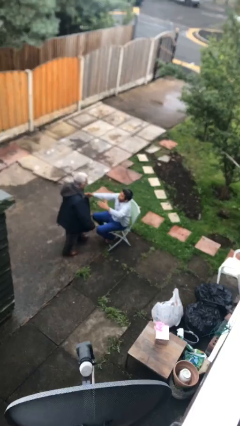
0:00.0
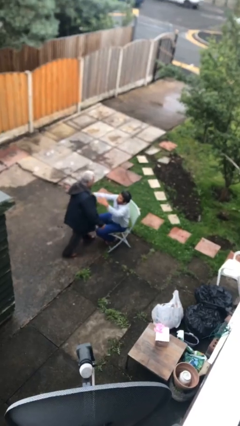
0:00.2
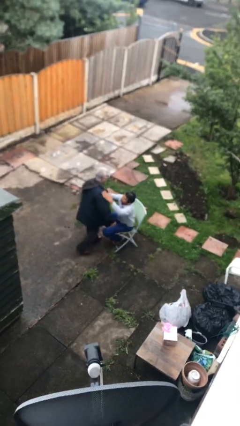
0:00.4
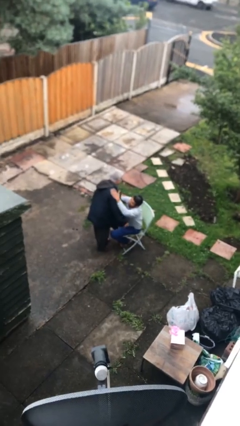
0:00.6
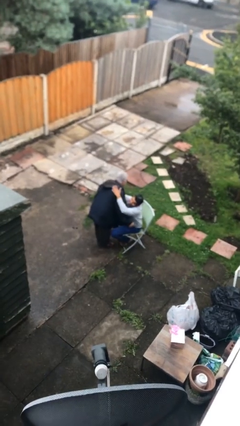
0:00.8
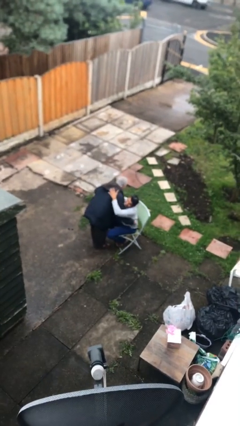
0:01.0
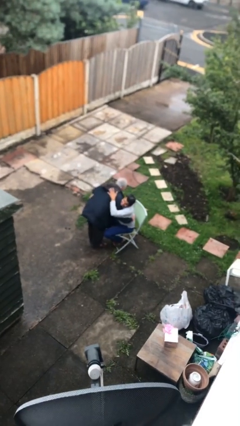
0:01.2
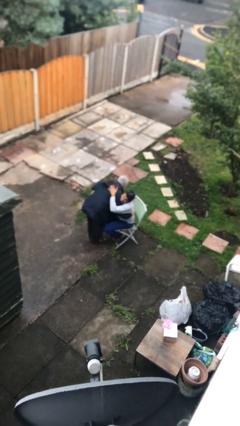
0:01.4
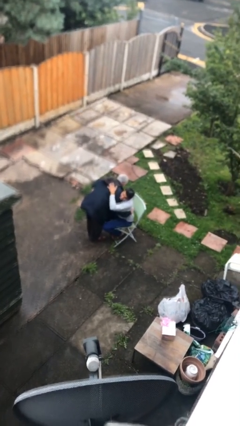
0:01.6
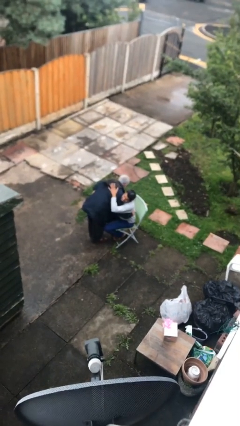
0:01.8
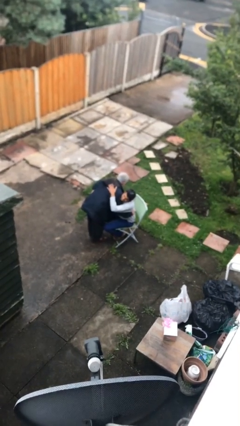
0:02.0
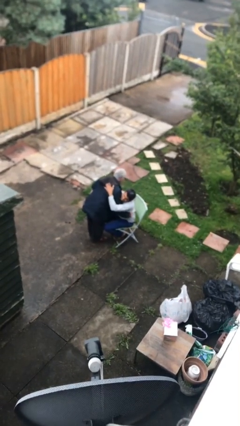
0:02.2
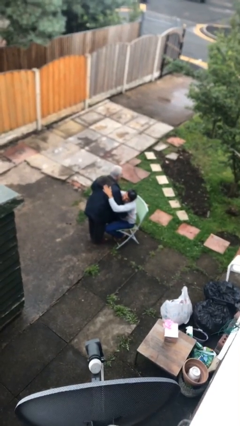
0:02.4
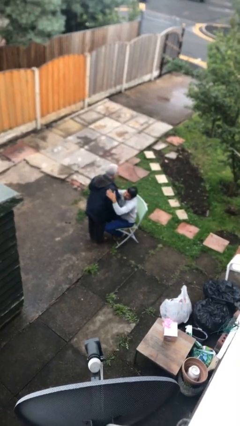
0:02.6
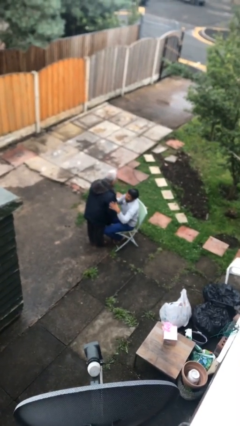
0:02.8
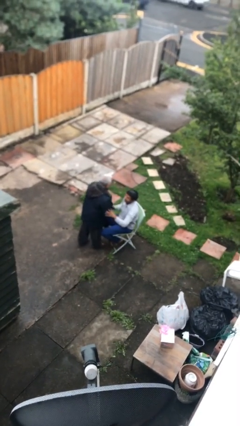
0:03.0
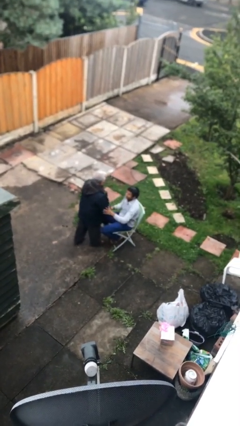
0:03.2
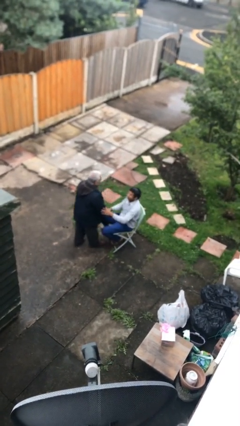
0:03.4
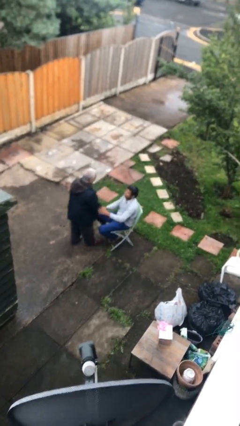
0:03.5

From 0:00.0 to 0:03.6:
person embraces person

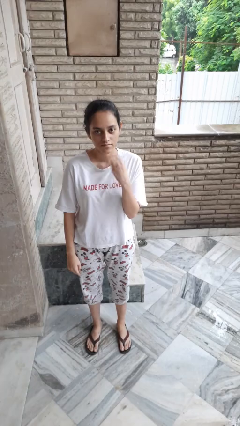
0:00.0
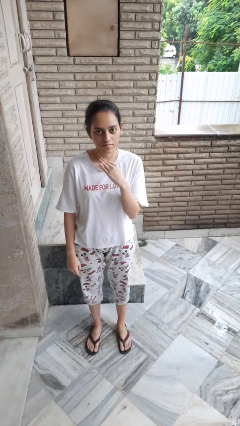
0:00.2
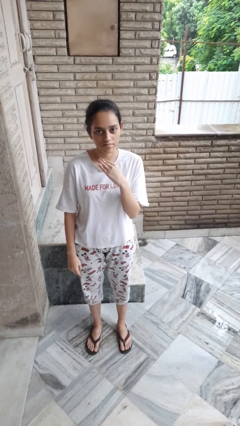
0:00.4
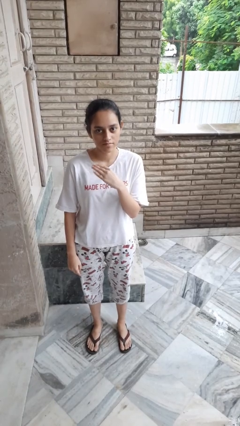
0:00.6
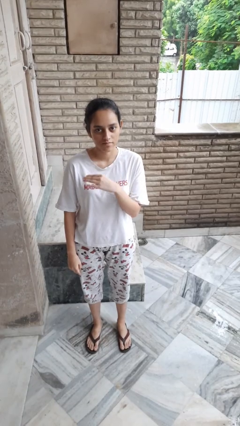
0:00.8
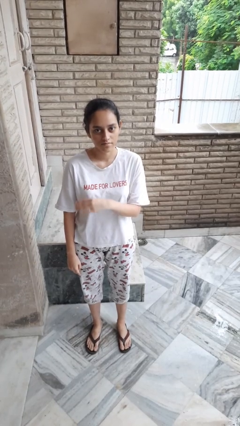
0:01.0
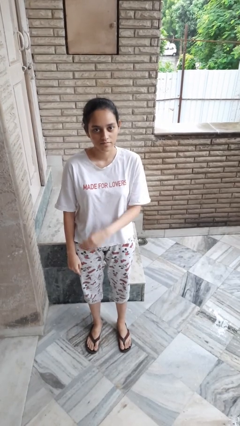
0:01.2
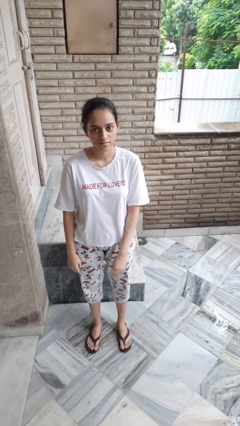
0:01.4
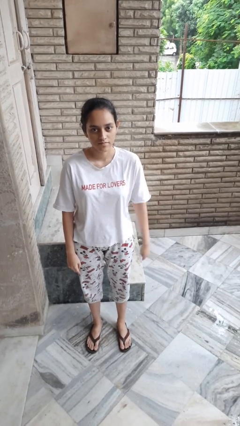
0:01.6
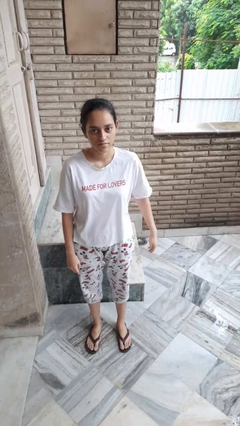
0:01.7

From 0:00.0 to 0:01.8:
person gestures cut

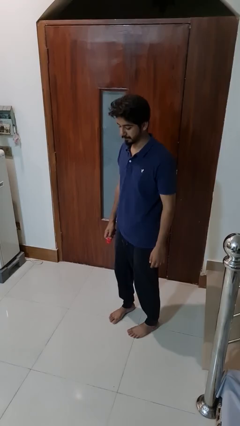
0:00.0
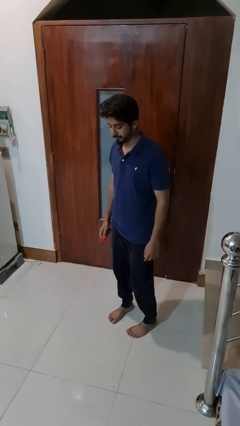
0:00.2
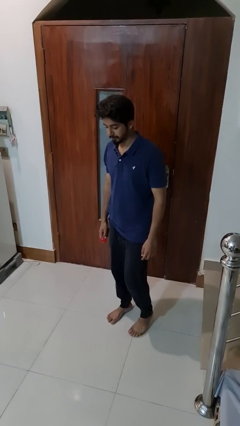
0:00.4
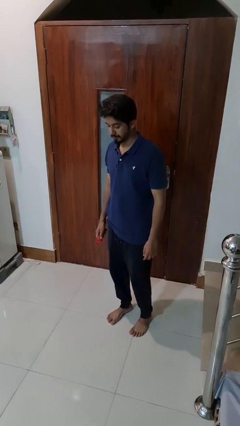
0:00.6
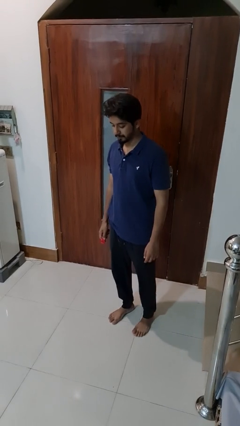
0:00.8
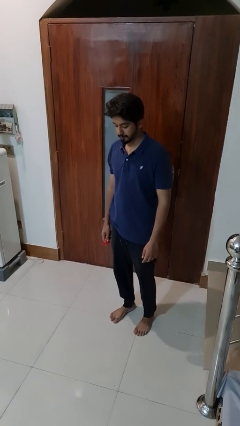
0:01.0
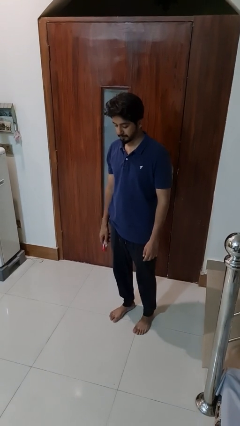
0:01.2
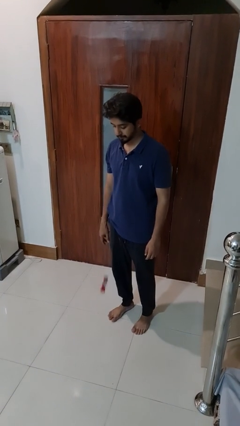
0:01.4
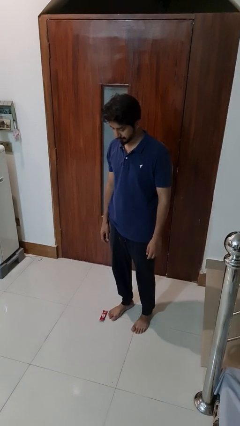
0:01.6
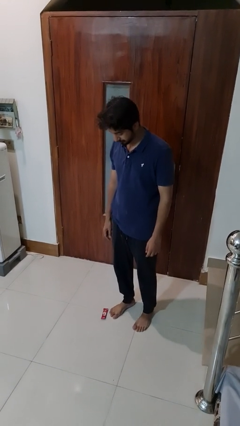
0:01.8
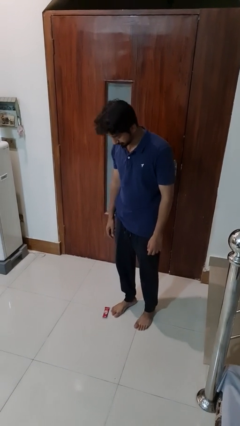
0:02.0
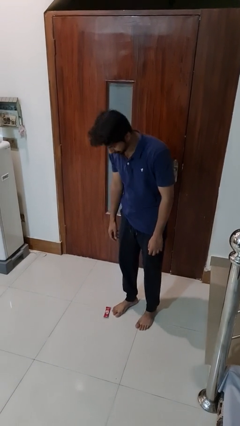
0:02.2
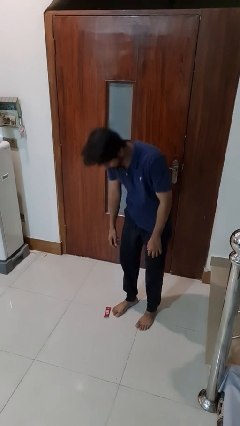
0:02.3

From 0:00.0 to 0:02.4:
person throws object to ground

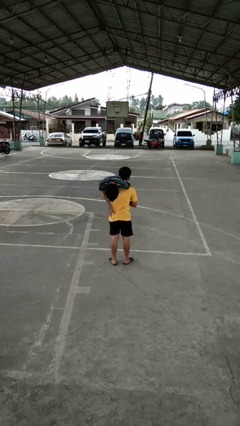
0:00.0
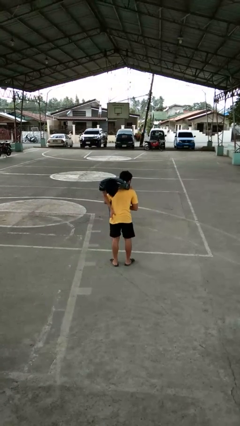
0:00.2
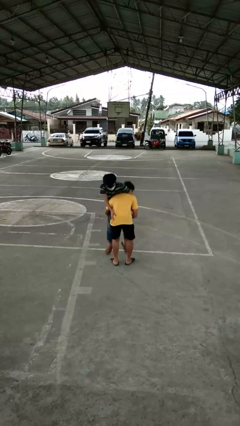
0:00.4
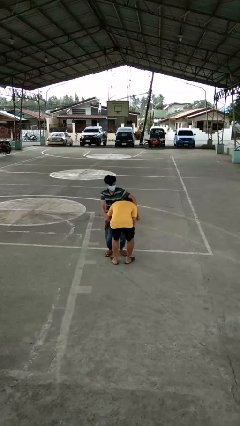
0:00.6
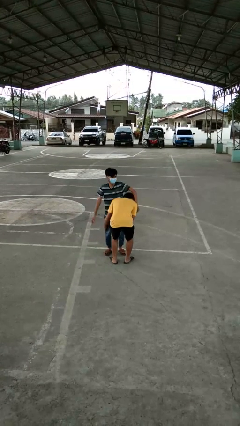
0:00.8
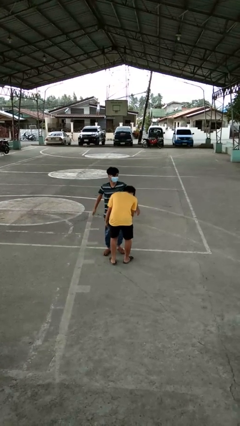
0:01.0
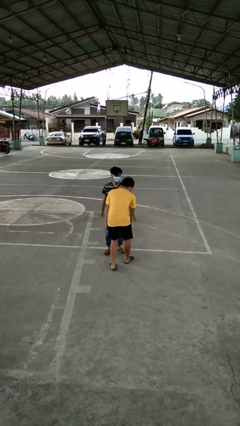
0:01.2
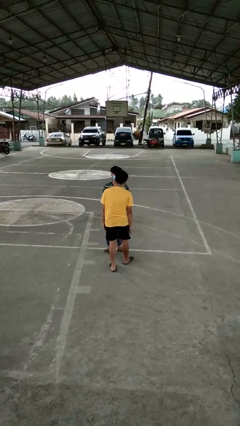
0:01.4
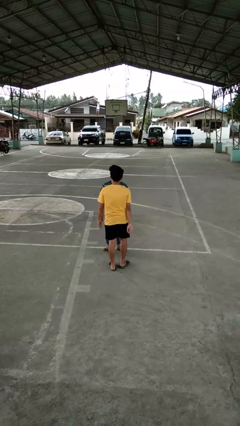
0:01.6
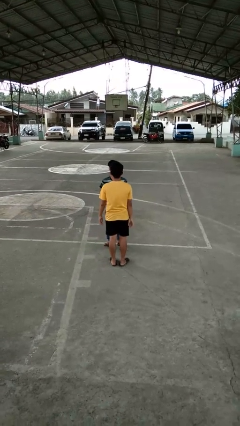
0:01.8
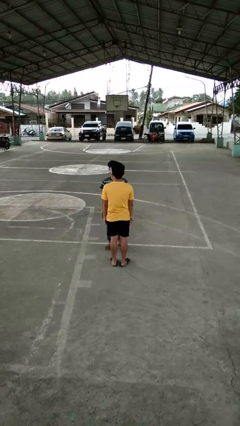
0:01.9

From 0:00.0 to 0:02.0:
person puts down person

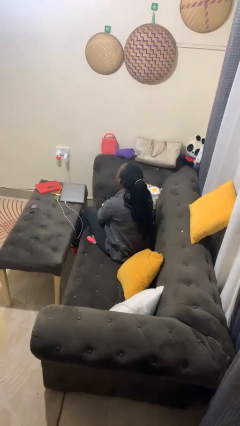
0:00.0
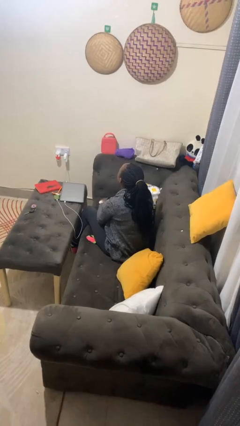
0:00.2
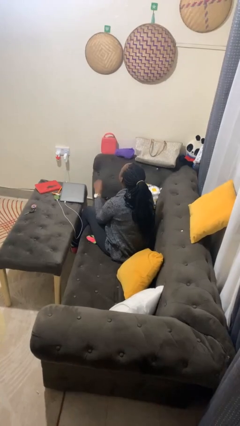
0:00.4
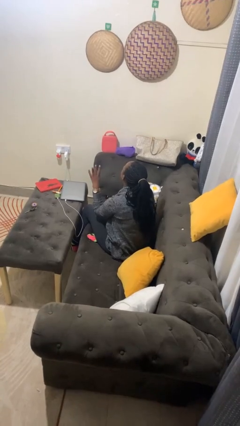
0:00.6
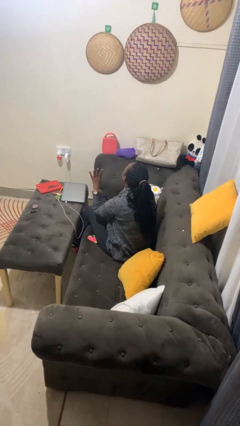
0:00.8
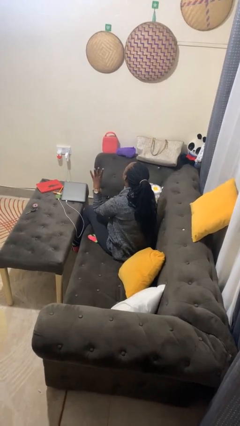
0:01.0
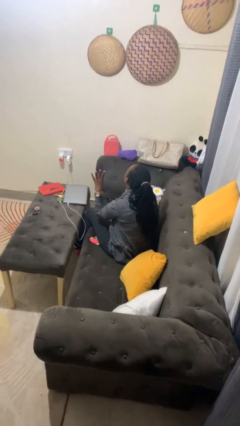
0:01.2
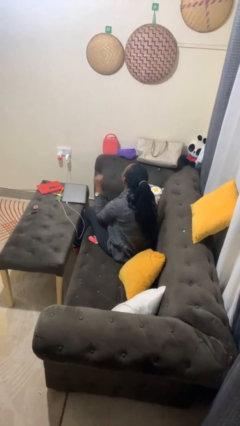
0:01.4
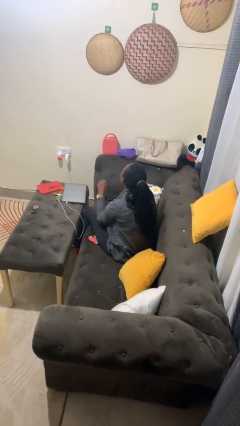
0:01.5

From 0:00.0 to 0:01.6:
person gestures number four

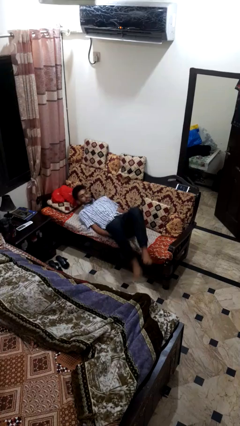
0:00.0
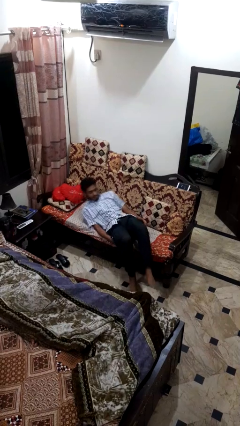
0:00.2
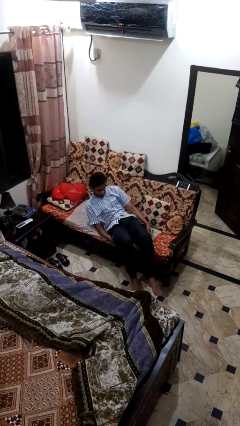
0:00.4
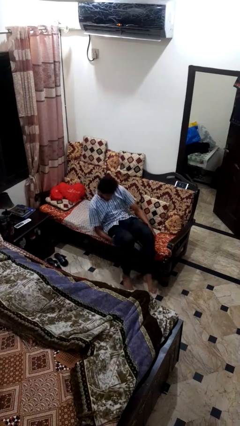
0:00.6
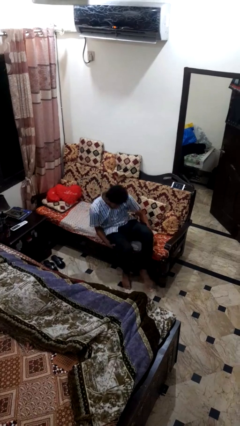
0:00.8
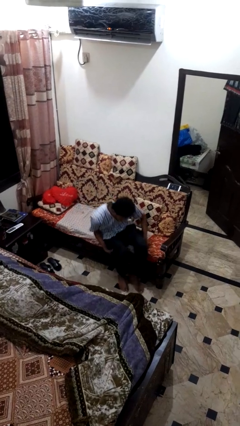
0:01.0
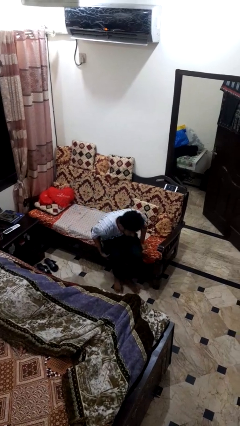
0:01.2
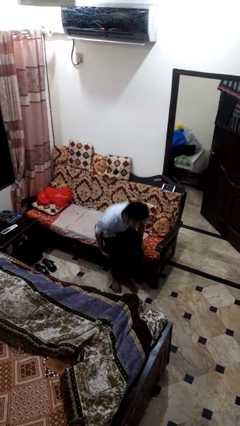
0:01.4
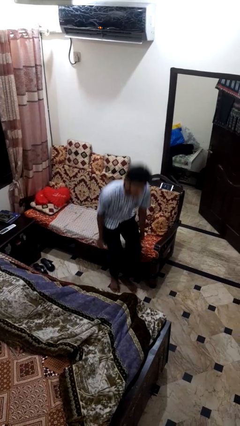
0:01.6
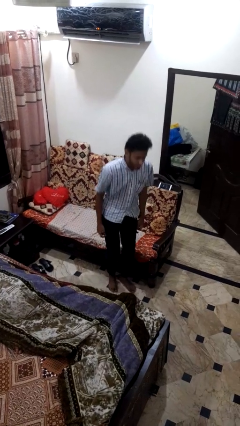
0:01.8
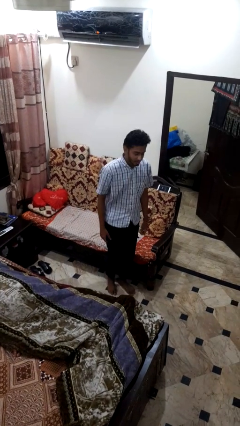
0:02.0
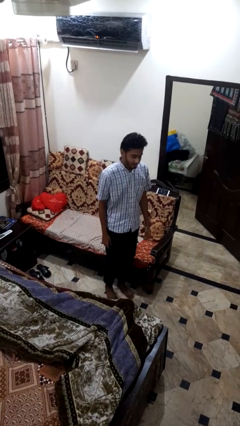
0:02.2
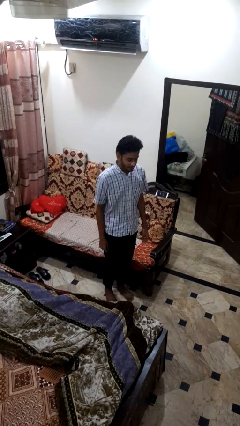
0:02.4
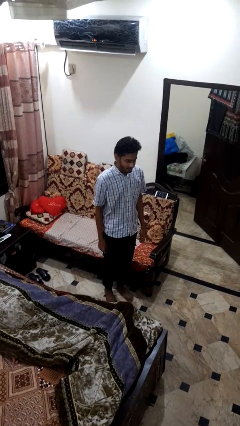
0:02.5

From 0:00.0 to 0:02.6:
person stands up

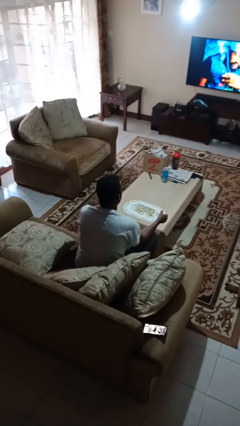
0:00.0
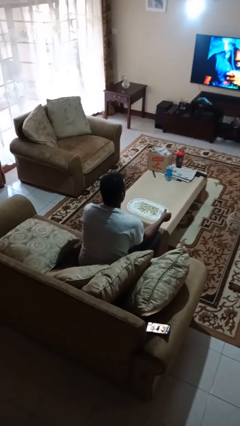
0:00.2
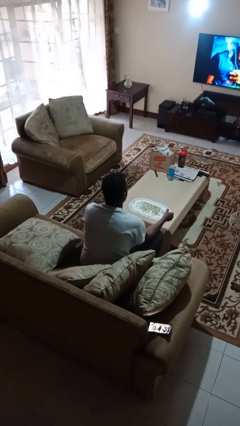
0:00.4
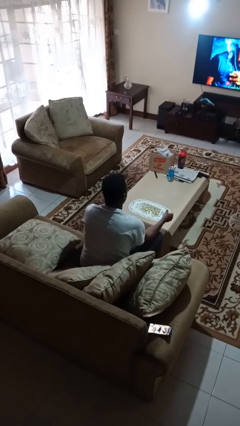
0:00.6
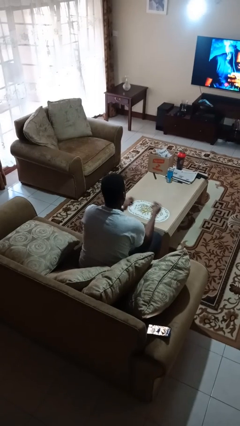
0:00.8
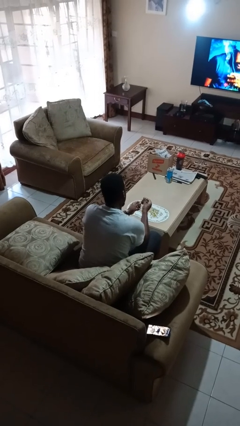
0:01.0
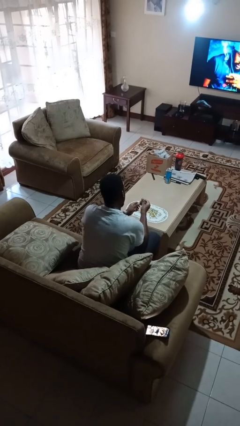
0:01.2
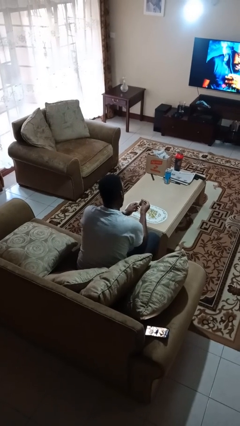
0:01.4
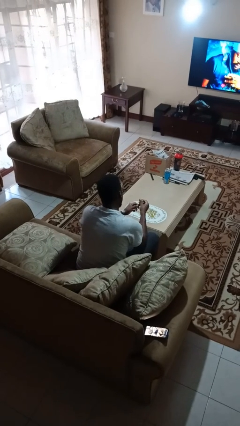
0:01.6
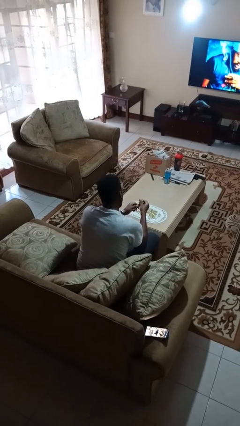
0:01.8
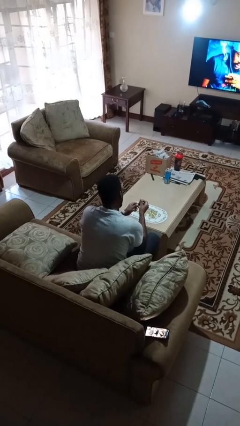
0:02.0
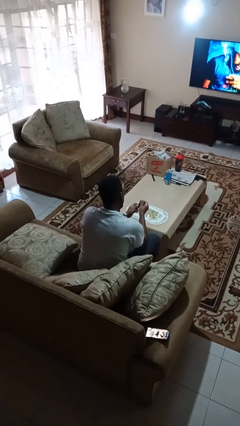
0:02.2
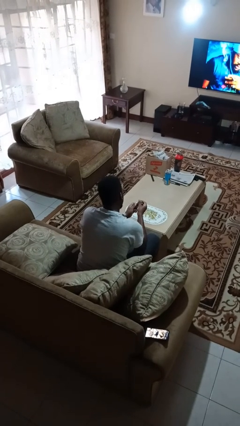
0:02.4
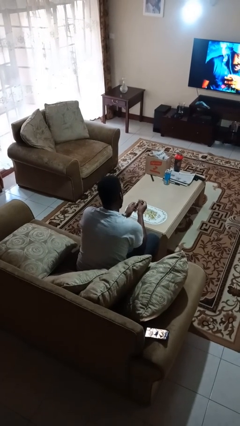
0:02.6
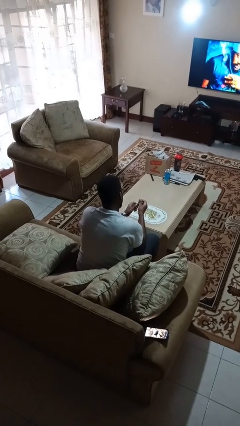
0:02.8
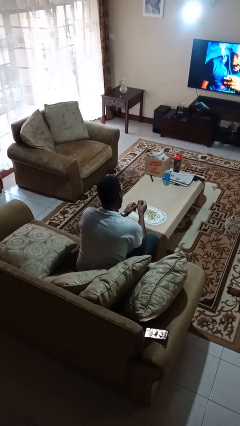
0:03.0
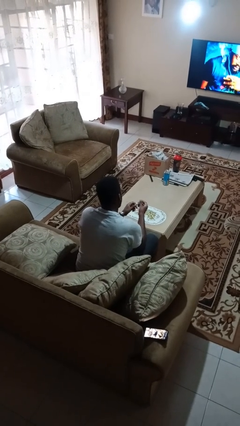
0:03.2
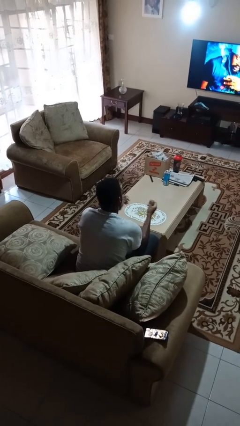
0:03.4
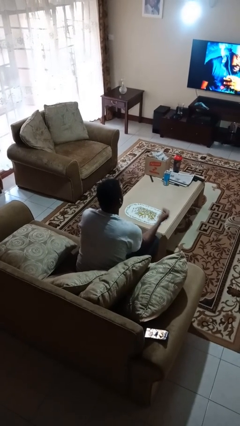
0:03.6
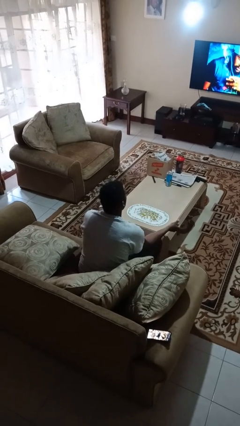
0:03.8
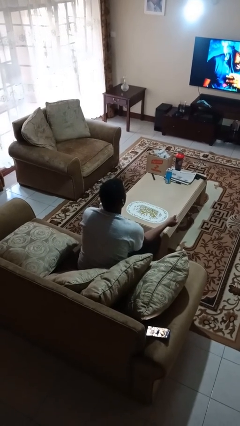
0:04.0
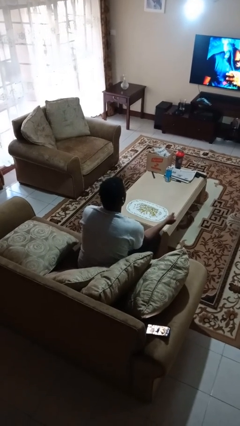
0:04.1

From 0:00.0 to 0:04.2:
person clips fingernails
